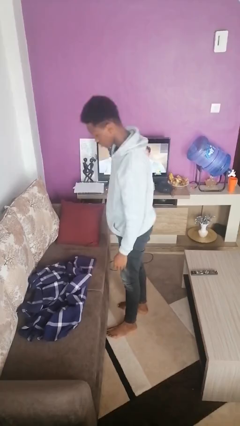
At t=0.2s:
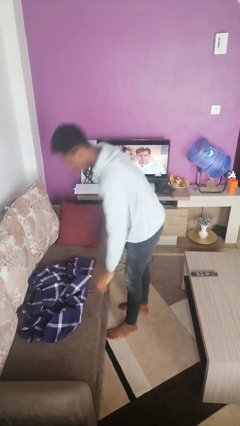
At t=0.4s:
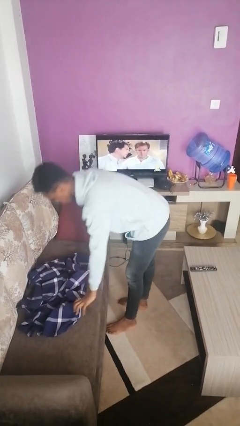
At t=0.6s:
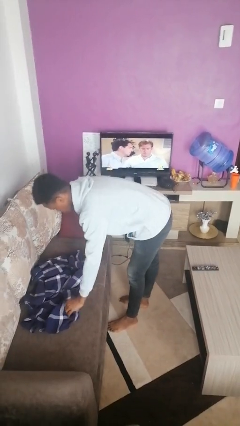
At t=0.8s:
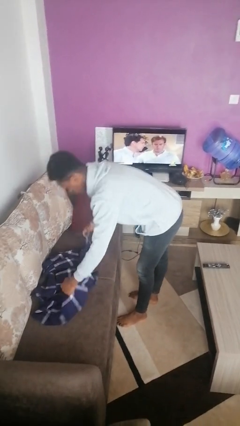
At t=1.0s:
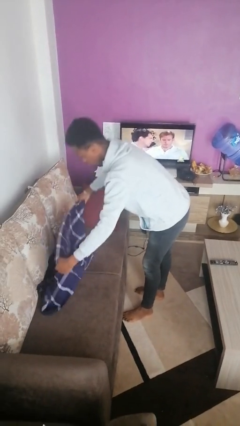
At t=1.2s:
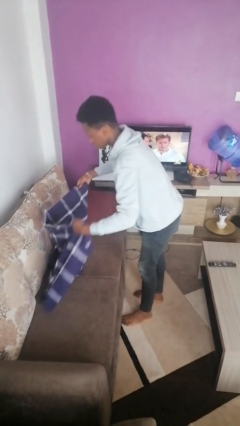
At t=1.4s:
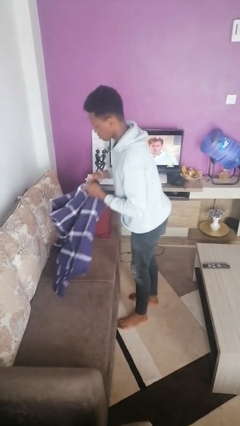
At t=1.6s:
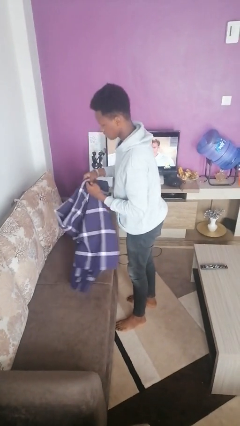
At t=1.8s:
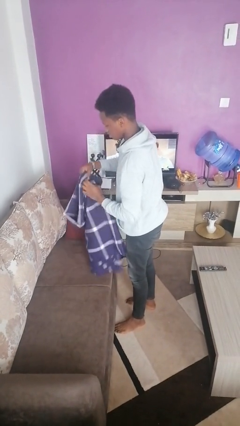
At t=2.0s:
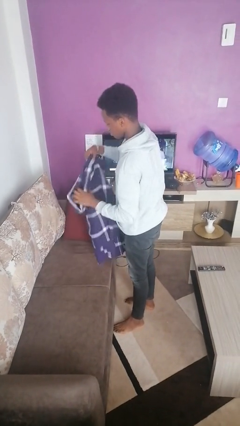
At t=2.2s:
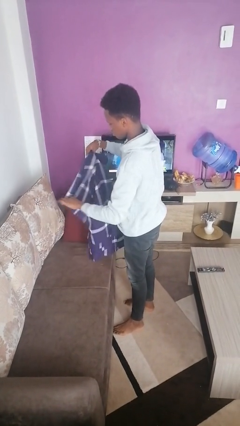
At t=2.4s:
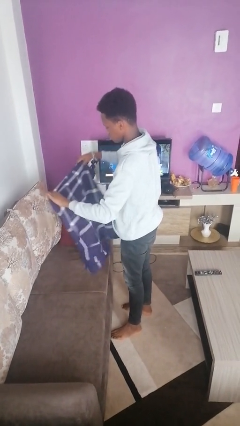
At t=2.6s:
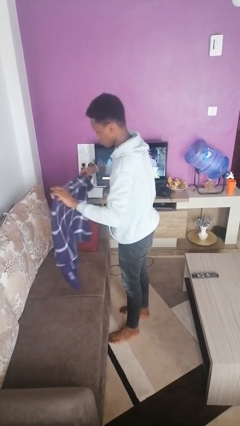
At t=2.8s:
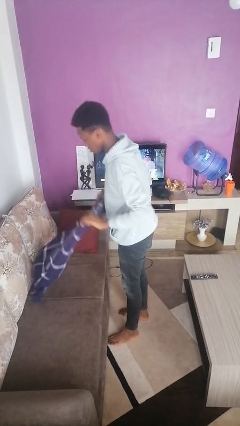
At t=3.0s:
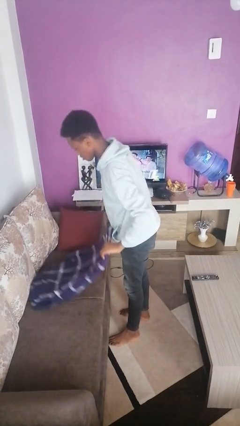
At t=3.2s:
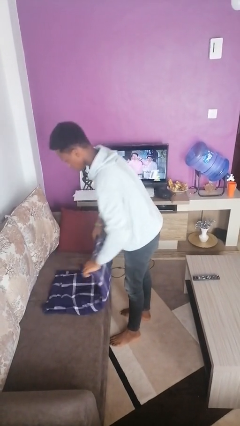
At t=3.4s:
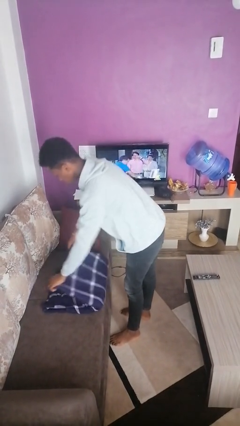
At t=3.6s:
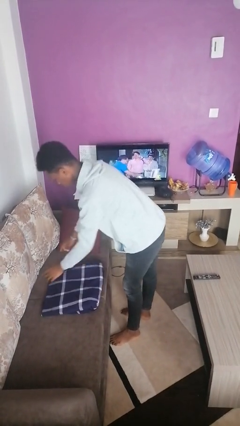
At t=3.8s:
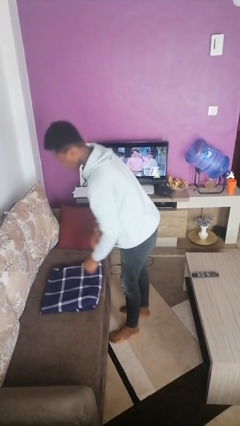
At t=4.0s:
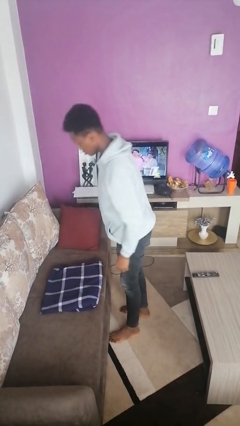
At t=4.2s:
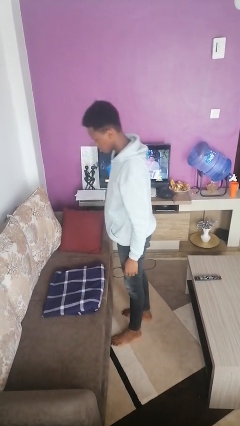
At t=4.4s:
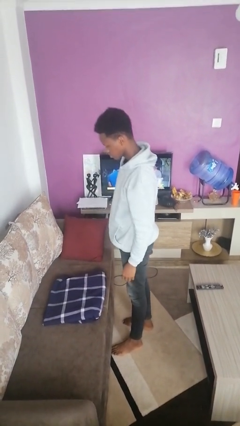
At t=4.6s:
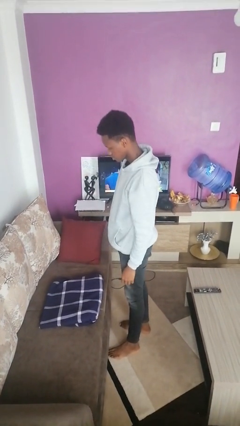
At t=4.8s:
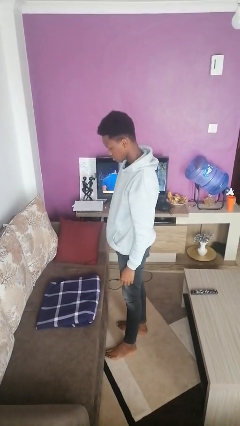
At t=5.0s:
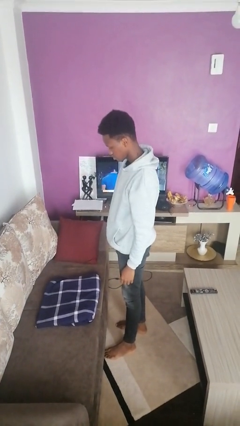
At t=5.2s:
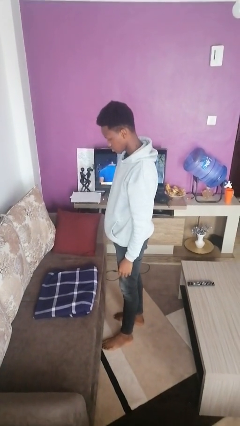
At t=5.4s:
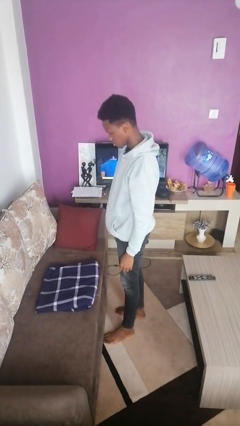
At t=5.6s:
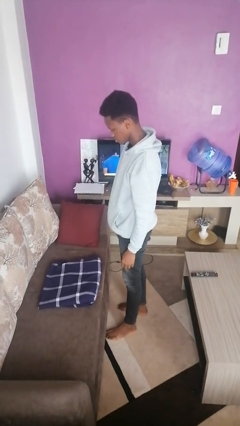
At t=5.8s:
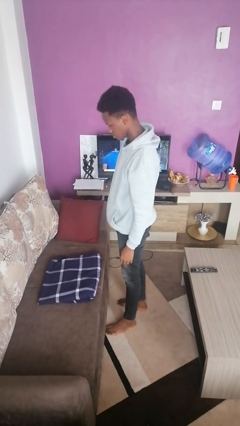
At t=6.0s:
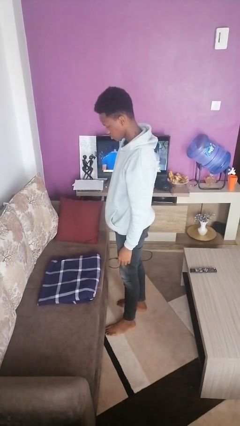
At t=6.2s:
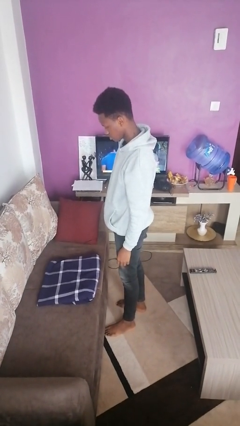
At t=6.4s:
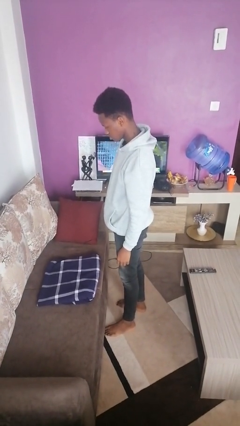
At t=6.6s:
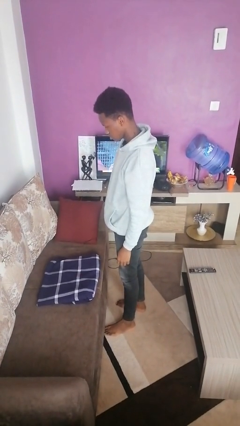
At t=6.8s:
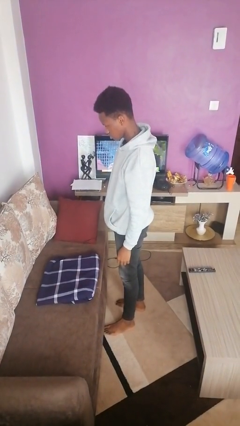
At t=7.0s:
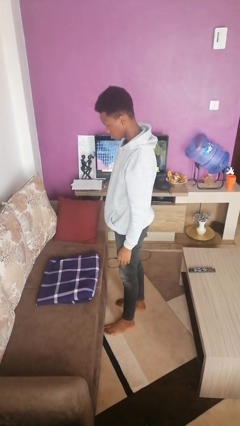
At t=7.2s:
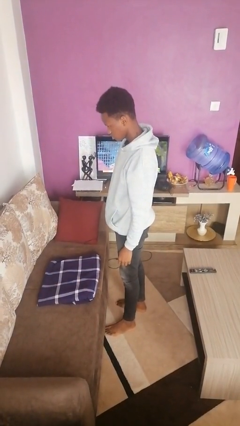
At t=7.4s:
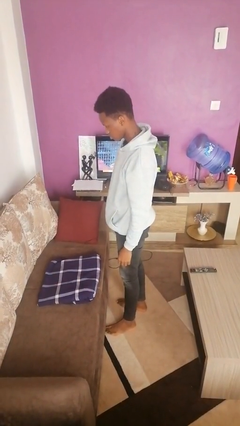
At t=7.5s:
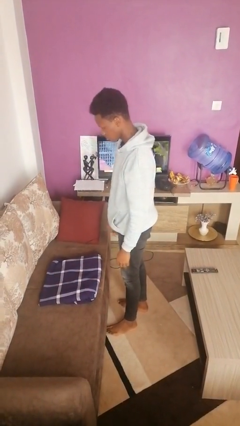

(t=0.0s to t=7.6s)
person folds blanket

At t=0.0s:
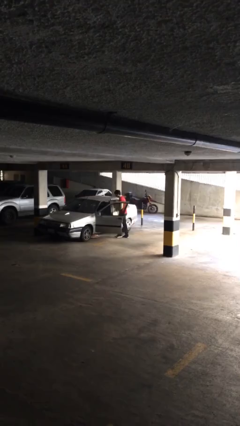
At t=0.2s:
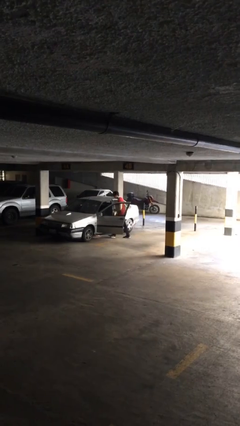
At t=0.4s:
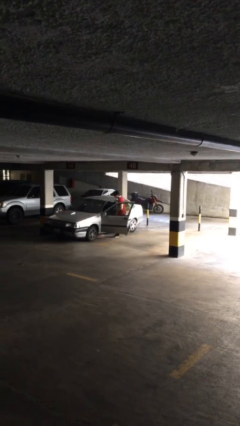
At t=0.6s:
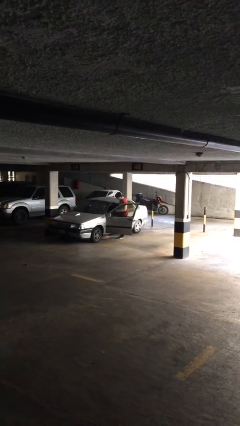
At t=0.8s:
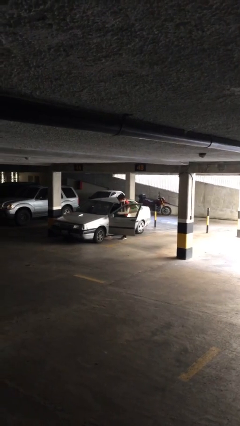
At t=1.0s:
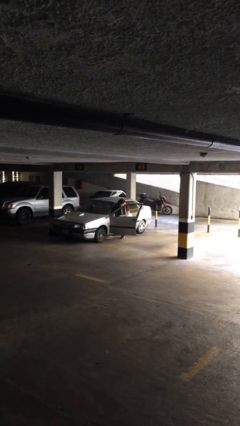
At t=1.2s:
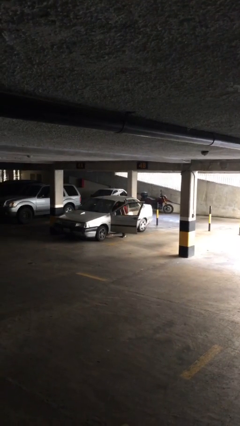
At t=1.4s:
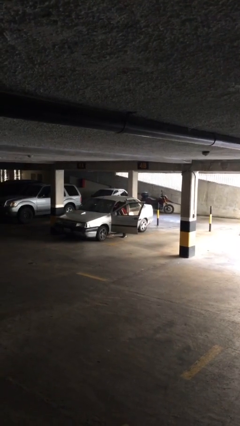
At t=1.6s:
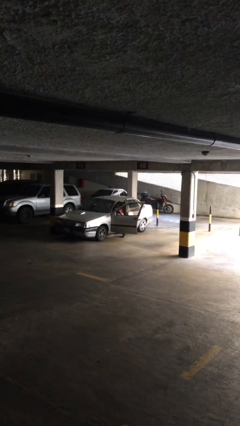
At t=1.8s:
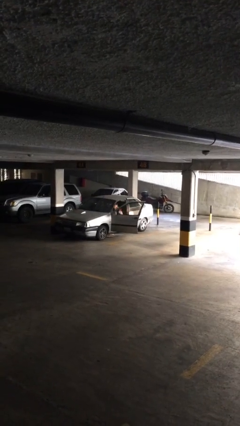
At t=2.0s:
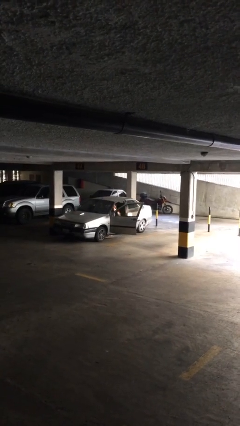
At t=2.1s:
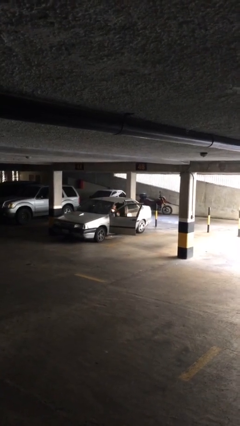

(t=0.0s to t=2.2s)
person enters car

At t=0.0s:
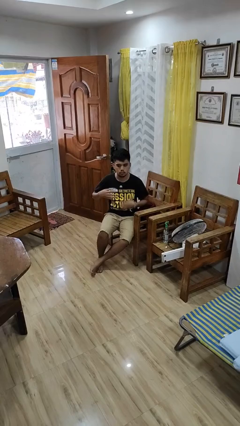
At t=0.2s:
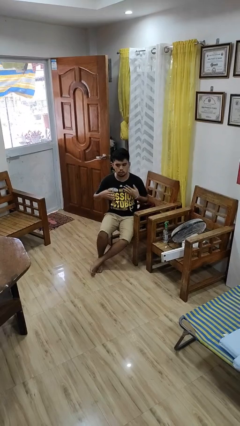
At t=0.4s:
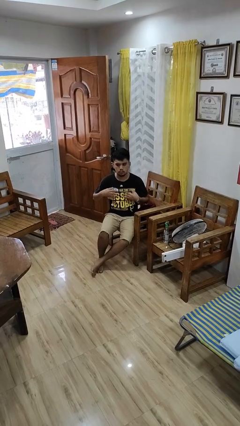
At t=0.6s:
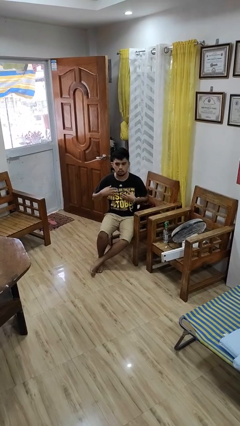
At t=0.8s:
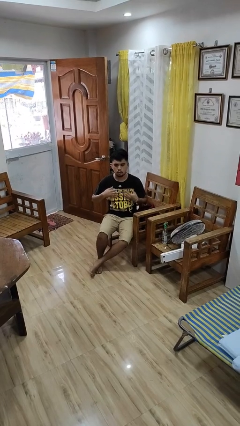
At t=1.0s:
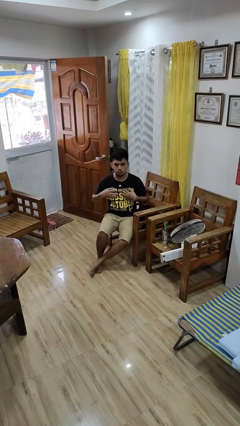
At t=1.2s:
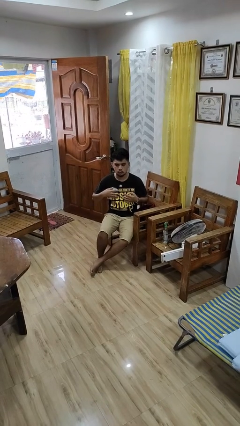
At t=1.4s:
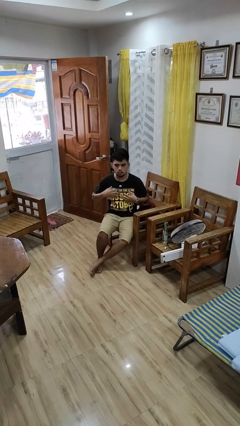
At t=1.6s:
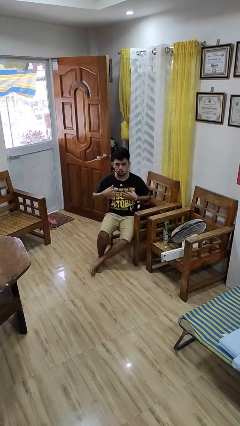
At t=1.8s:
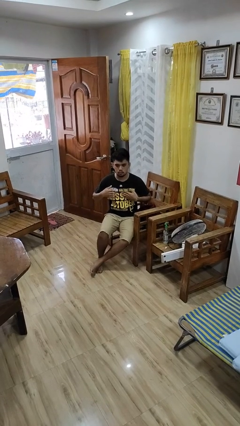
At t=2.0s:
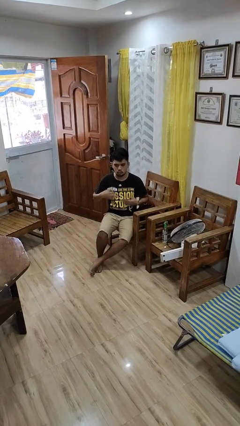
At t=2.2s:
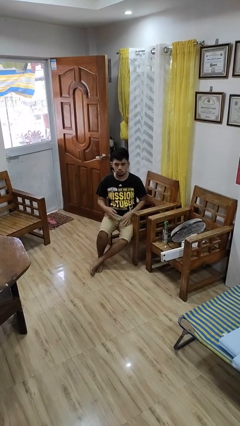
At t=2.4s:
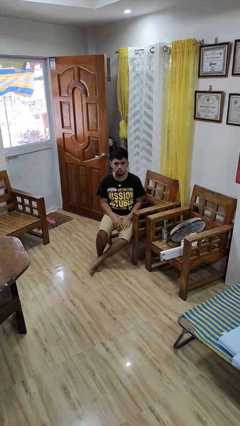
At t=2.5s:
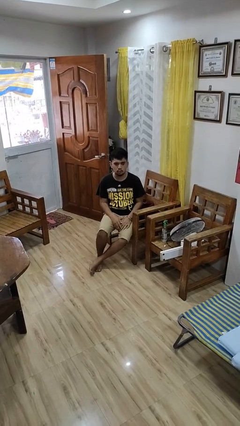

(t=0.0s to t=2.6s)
person drums on chest

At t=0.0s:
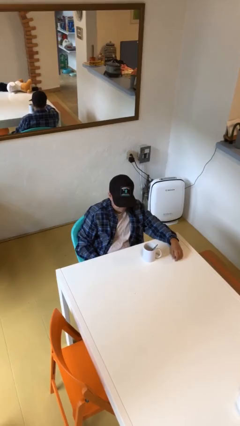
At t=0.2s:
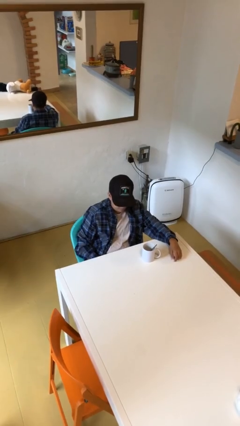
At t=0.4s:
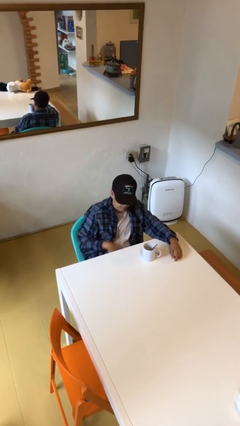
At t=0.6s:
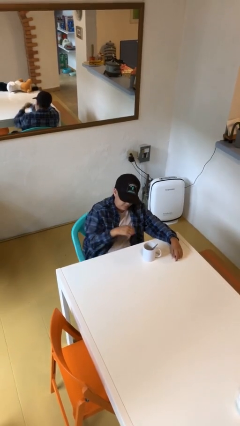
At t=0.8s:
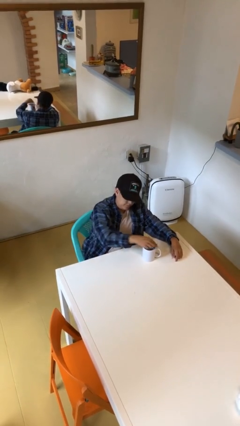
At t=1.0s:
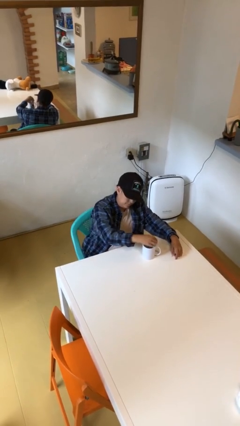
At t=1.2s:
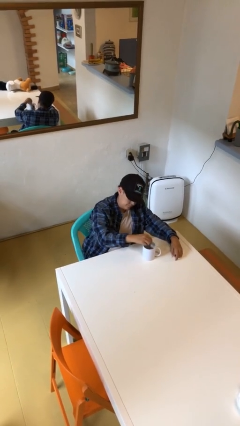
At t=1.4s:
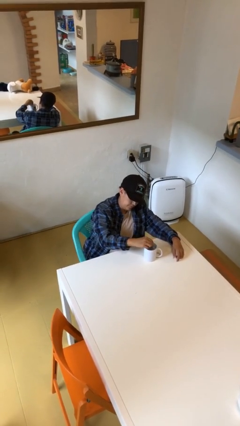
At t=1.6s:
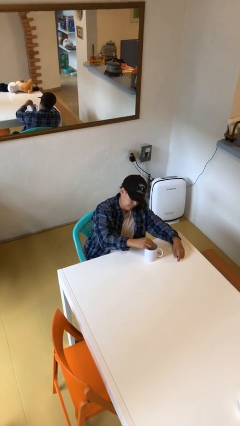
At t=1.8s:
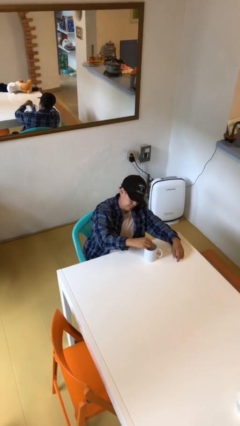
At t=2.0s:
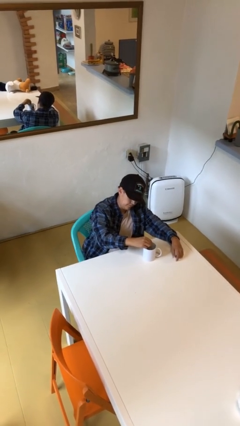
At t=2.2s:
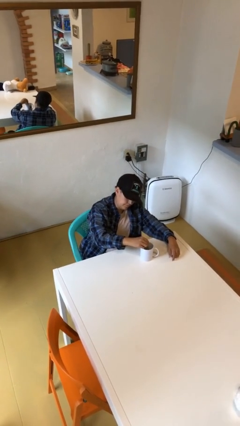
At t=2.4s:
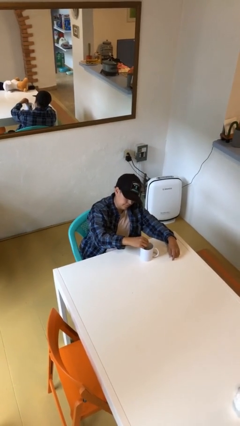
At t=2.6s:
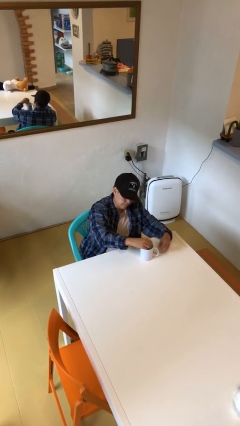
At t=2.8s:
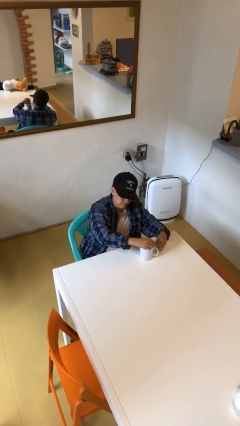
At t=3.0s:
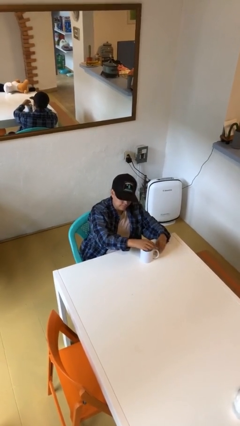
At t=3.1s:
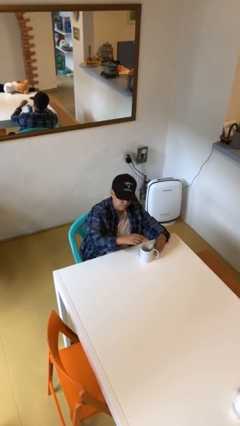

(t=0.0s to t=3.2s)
person stirs mug

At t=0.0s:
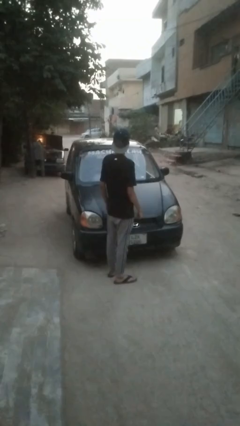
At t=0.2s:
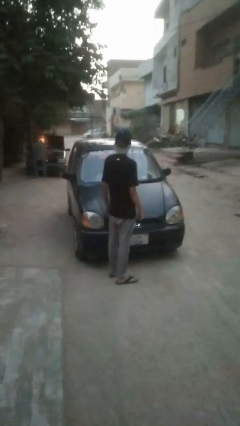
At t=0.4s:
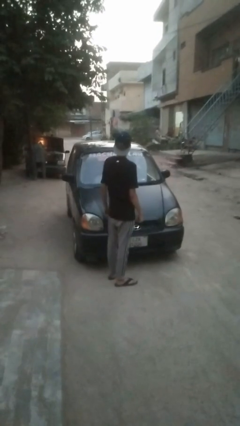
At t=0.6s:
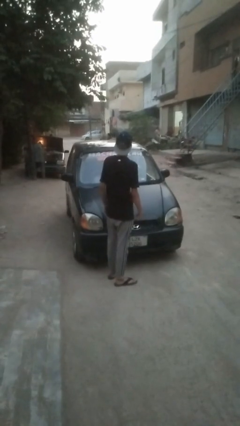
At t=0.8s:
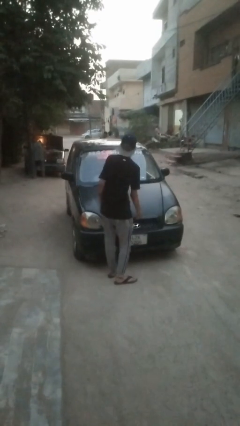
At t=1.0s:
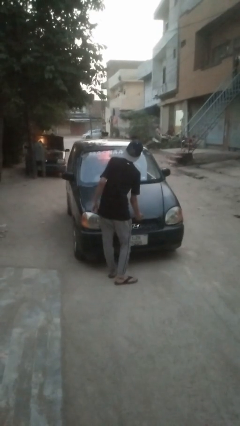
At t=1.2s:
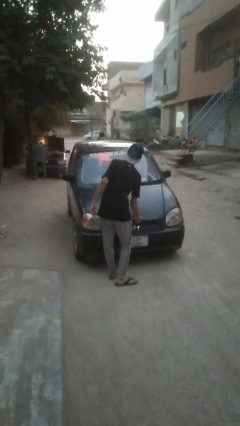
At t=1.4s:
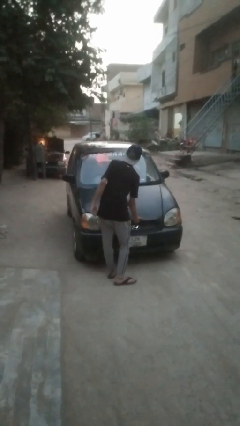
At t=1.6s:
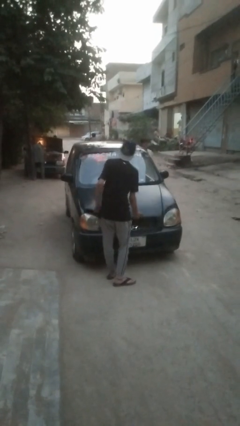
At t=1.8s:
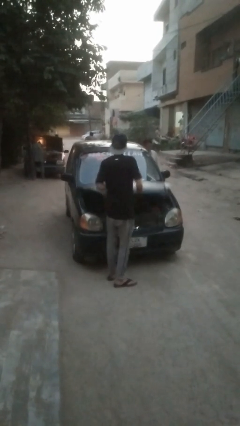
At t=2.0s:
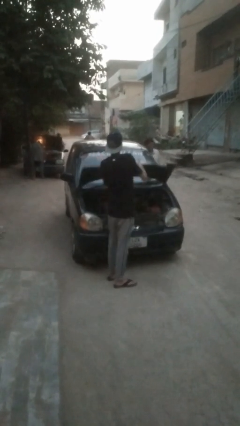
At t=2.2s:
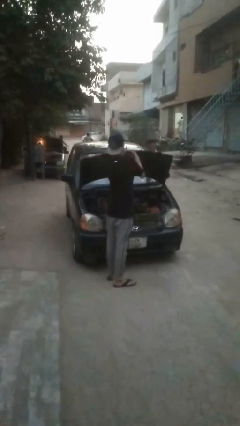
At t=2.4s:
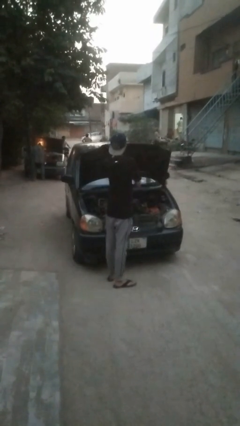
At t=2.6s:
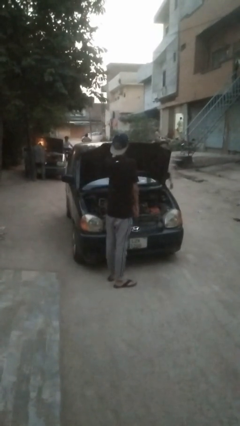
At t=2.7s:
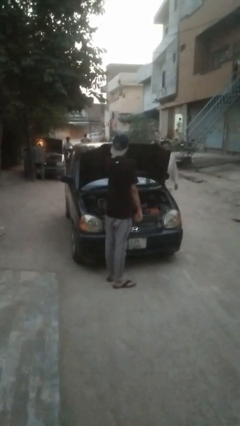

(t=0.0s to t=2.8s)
person opens car hood
